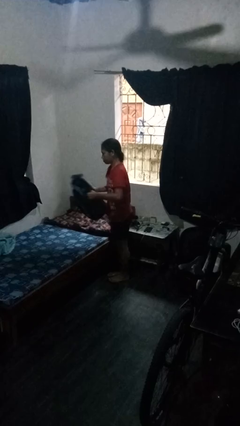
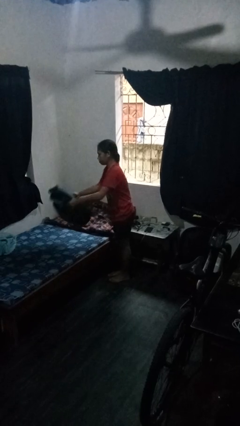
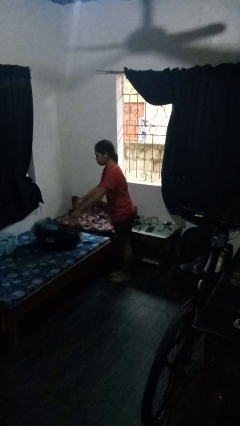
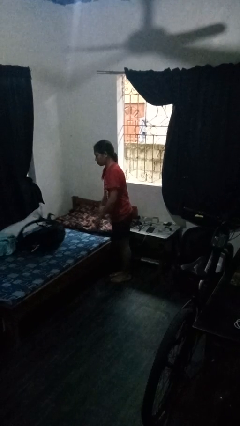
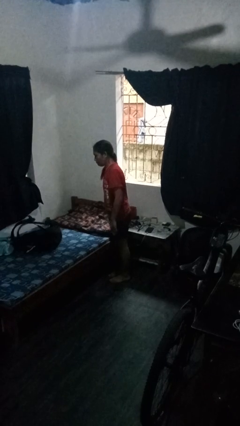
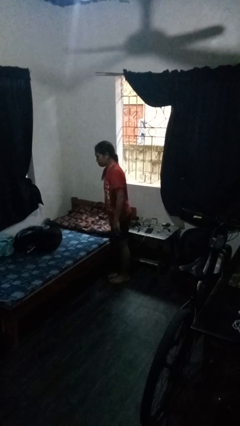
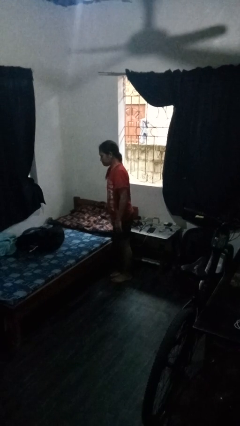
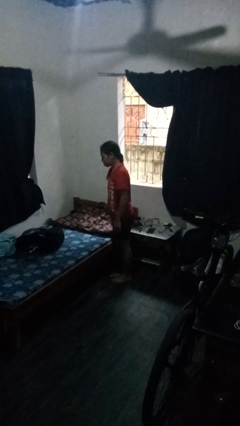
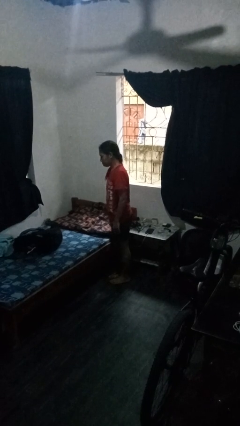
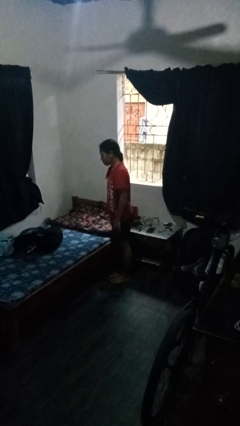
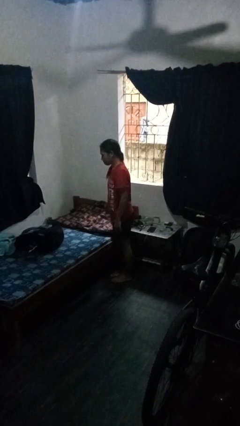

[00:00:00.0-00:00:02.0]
person throws object on bed

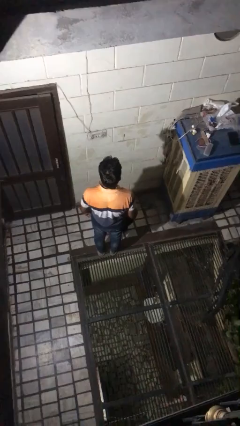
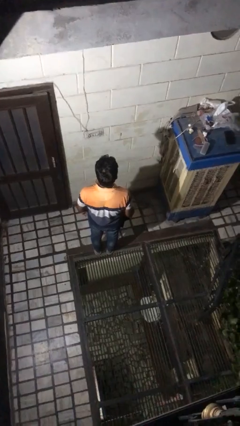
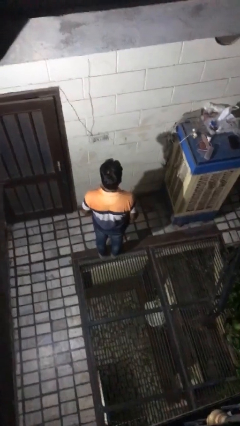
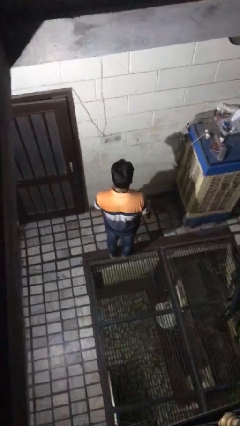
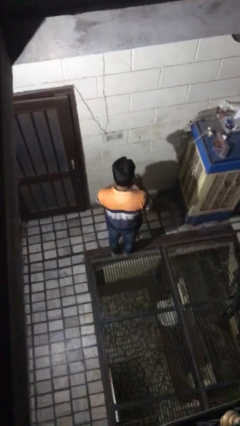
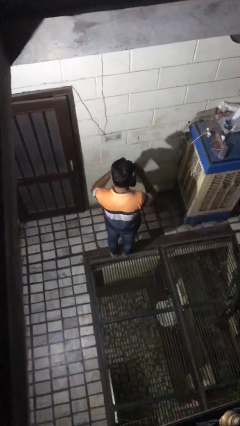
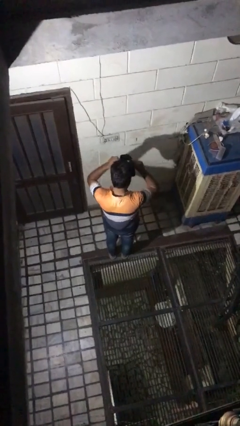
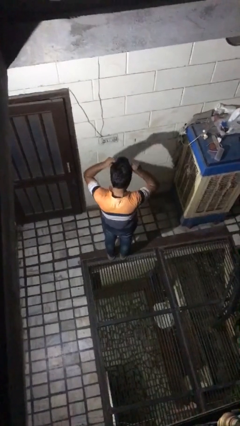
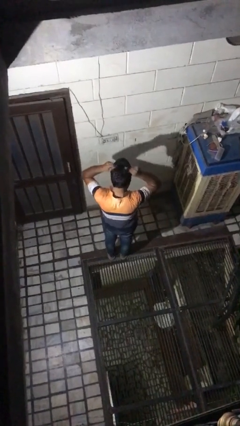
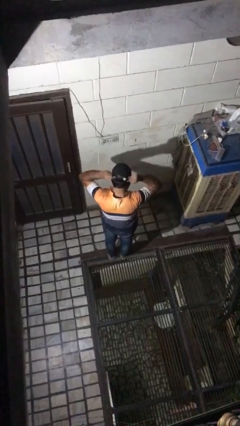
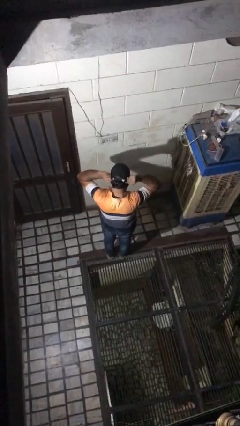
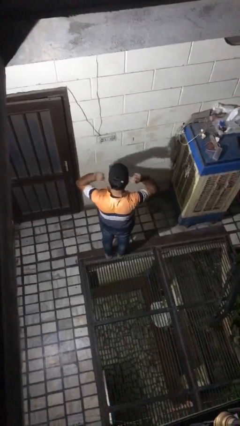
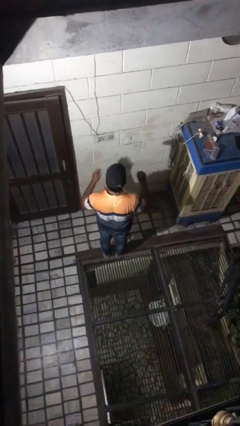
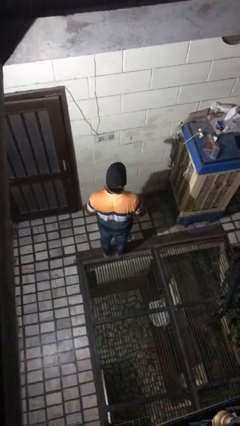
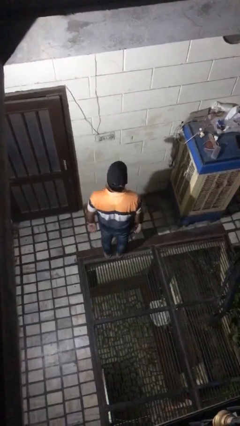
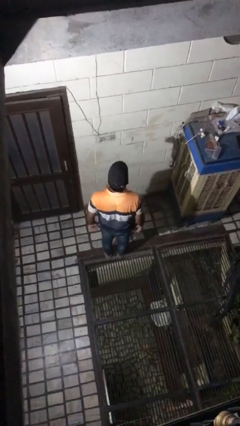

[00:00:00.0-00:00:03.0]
person puts on hat

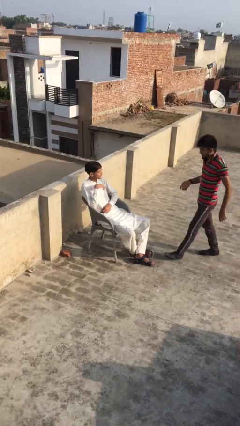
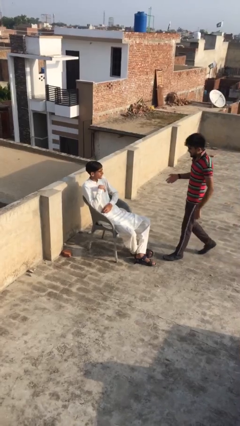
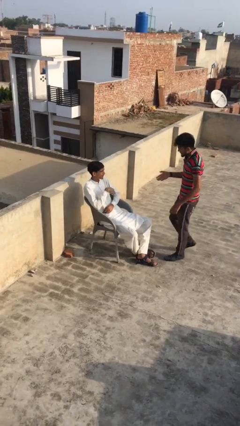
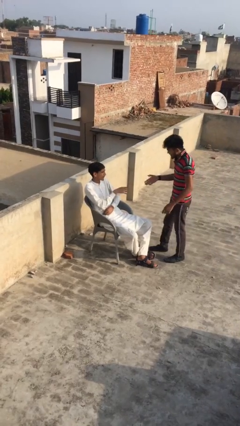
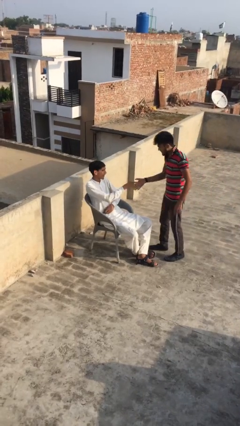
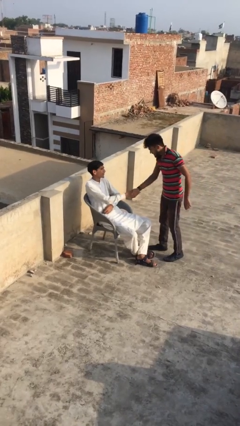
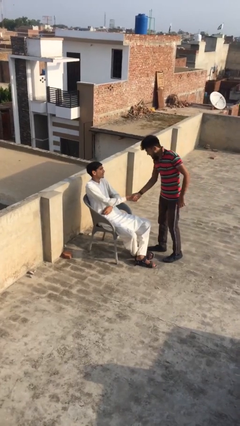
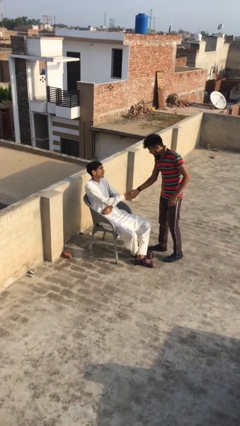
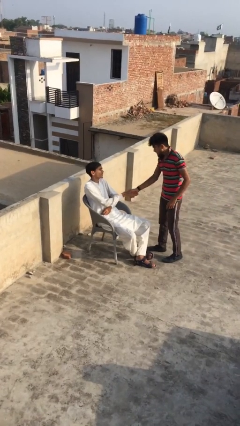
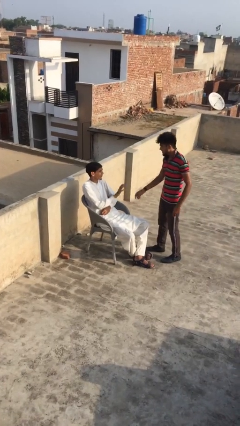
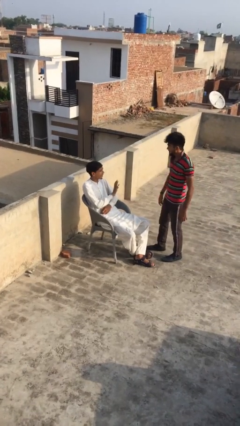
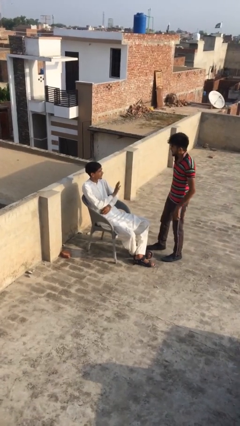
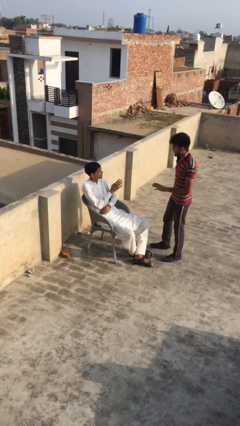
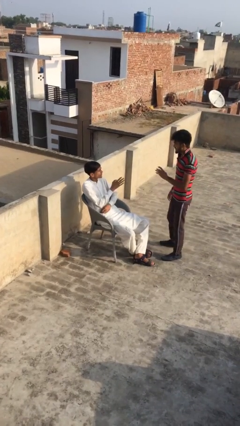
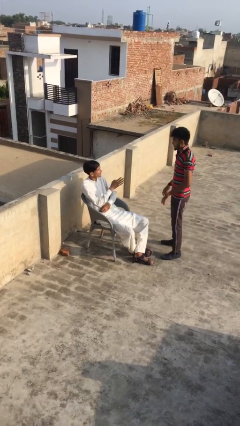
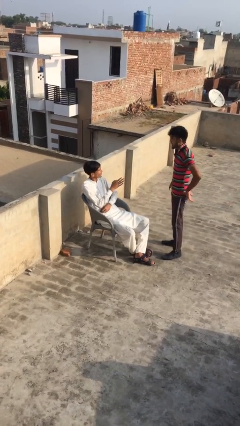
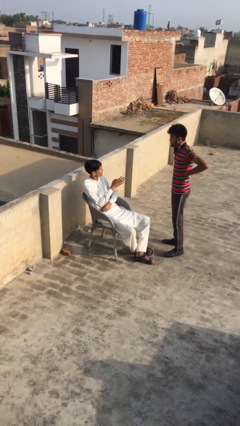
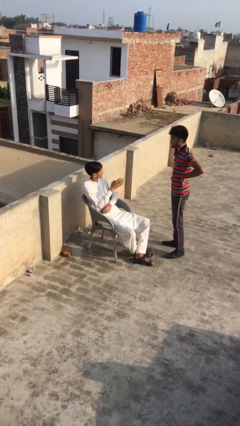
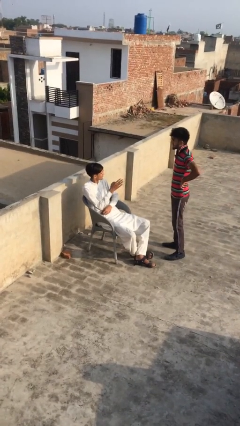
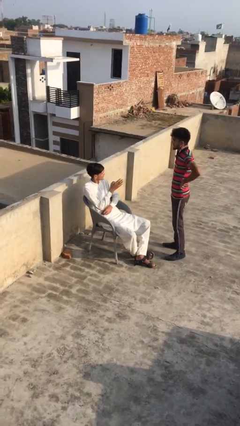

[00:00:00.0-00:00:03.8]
person shakes hand

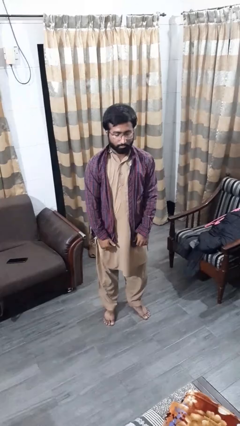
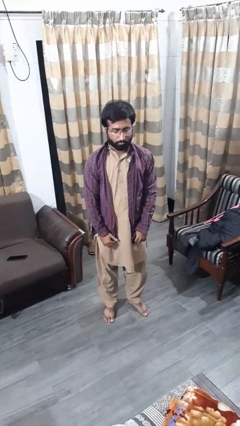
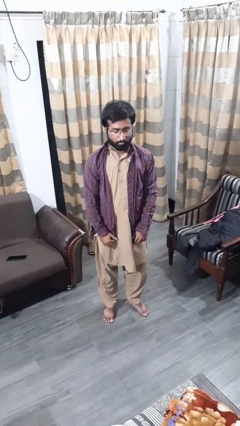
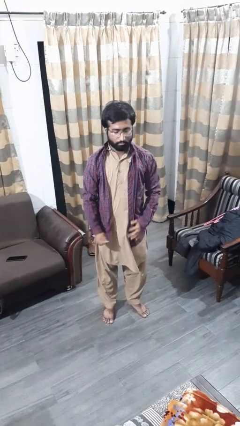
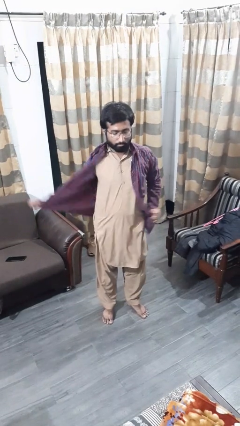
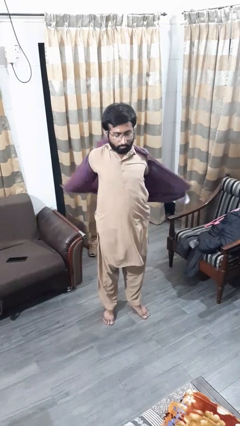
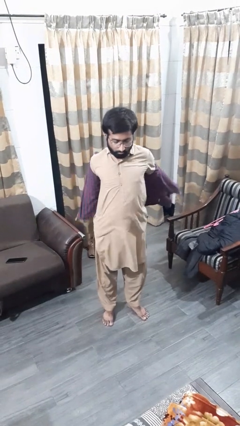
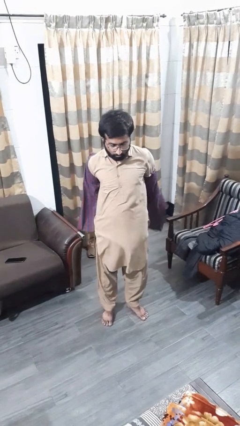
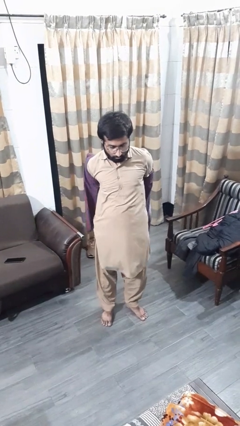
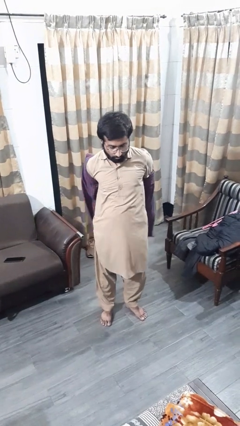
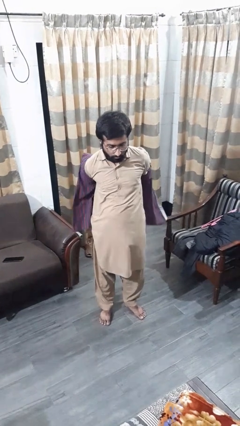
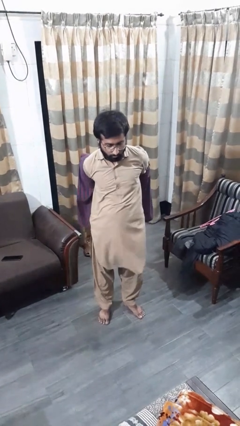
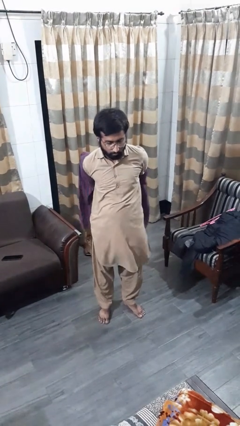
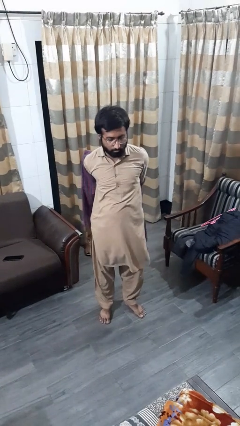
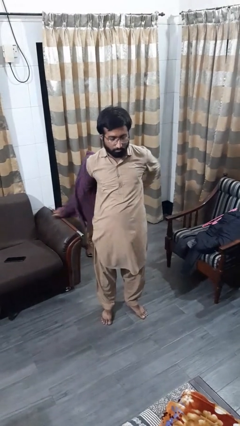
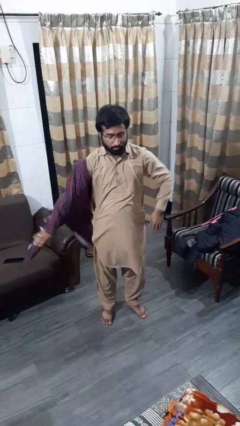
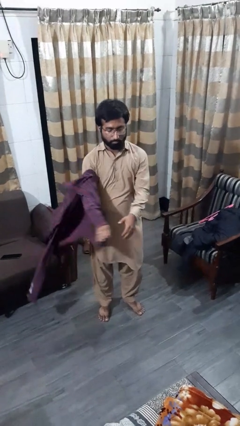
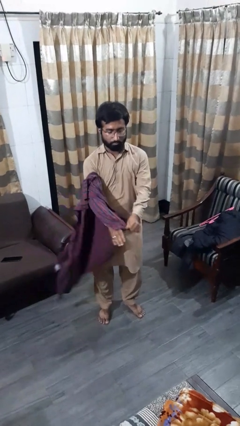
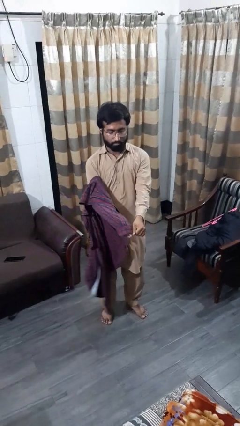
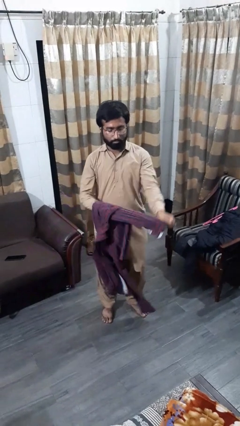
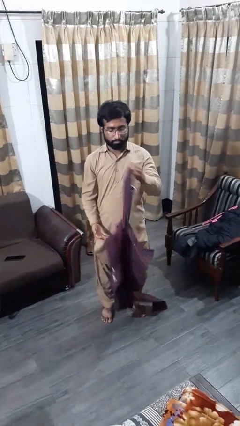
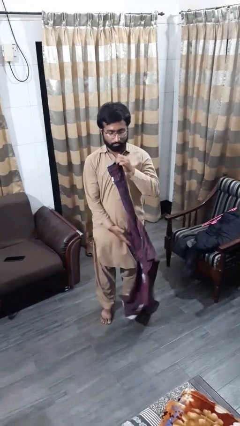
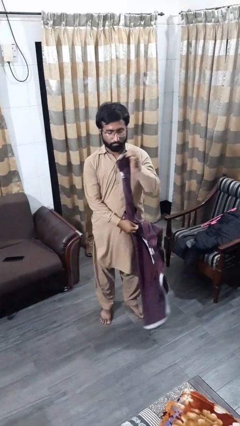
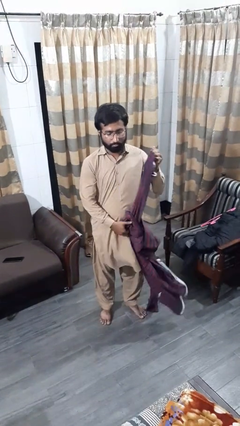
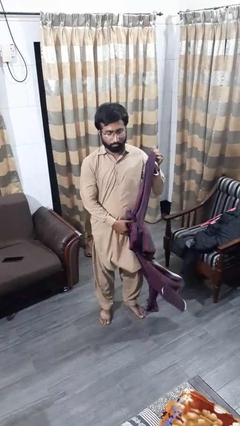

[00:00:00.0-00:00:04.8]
person takes off shirt

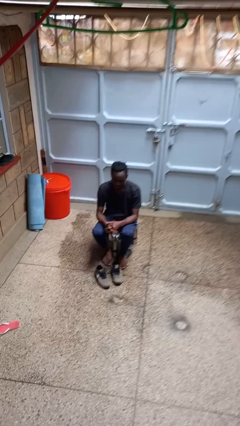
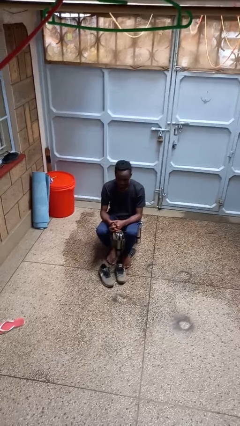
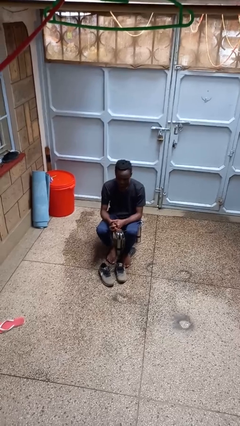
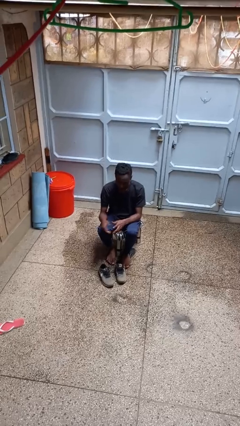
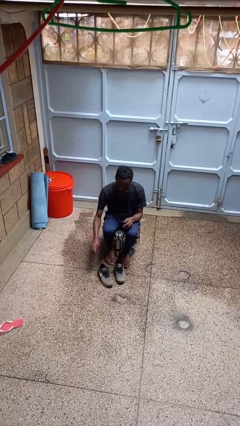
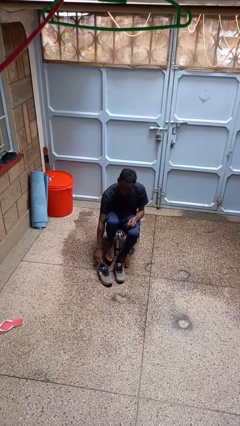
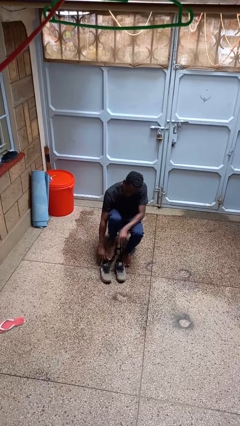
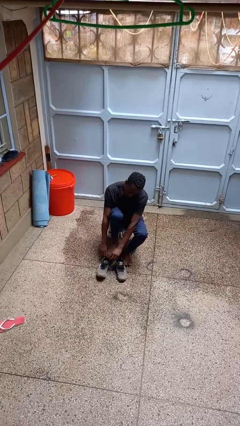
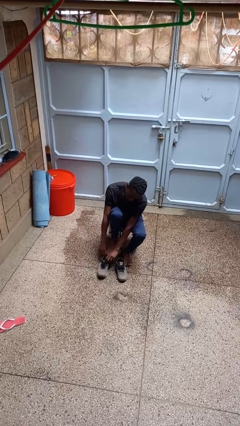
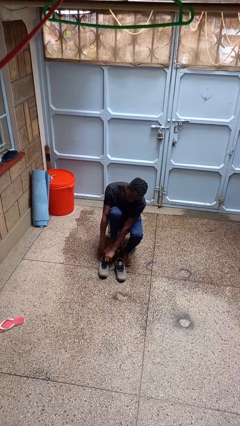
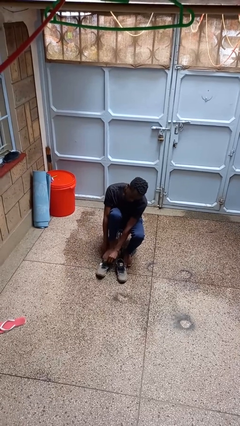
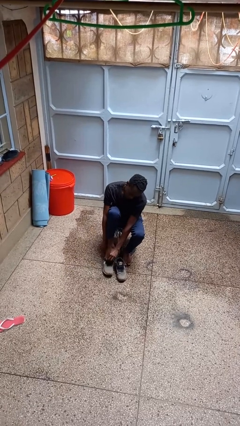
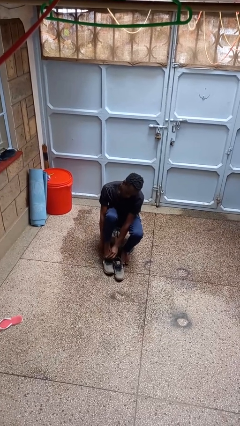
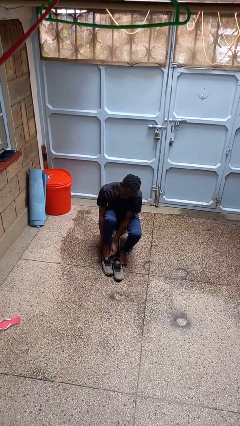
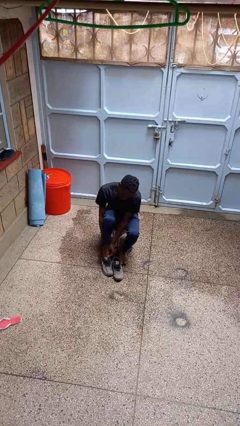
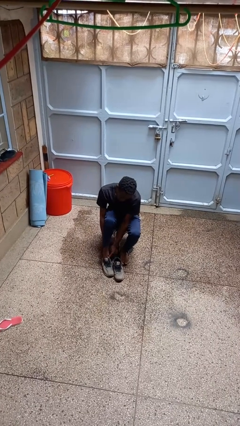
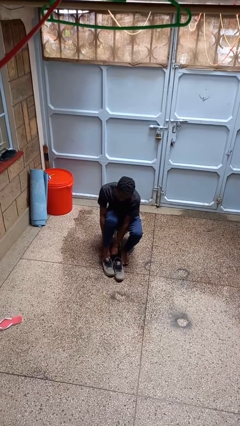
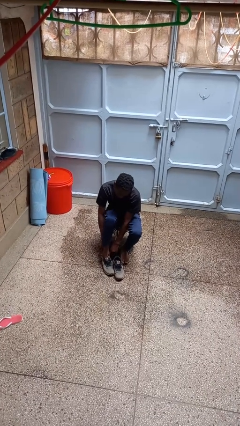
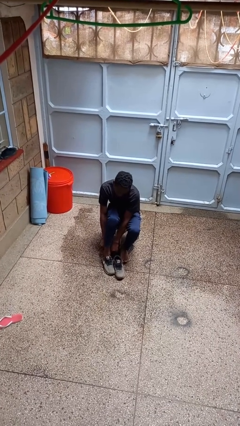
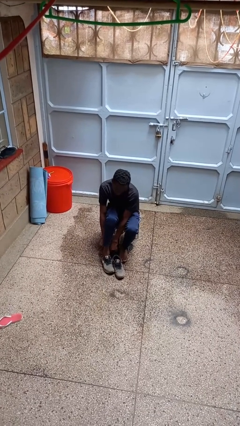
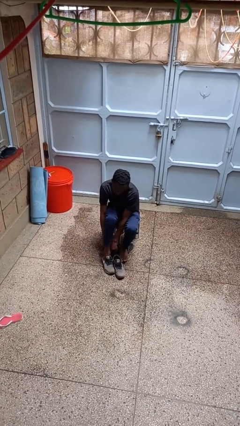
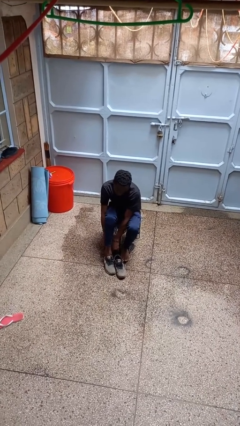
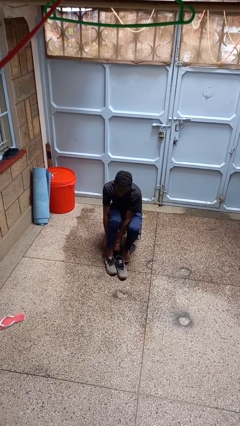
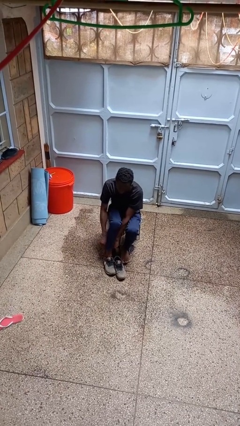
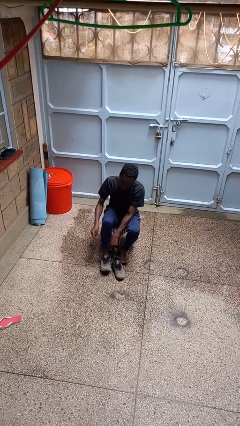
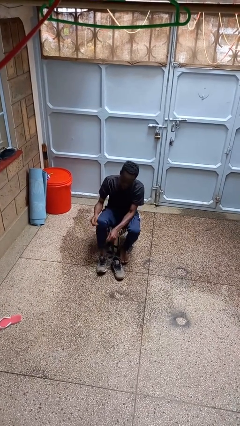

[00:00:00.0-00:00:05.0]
person puts on shoes
